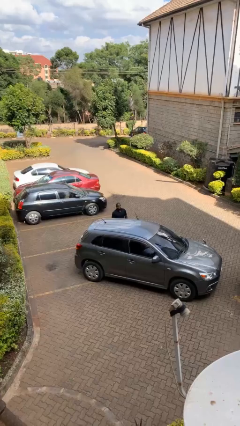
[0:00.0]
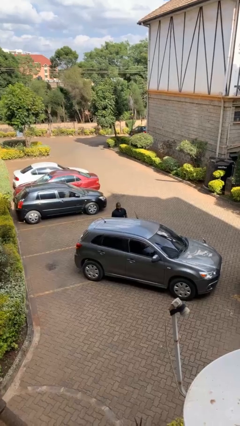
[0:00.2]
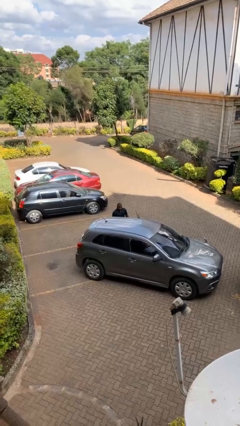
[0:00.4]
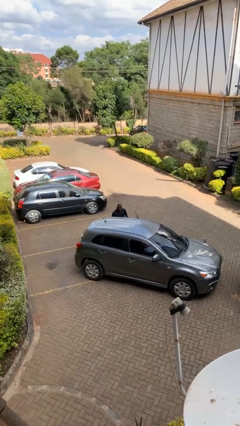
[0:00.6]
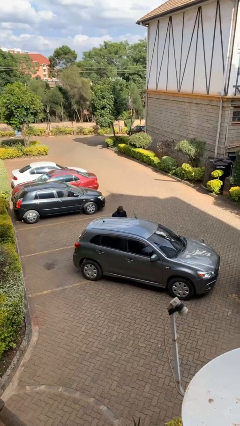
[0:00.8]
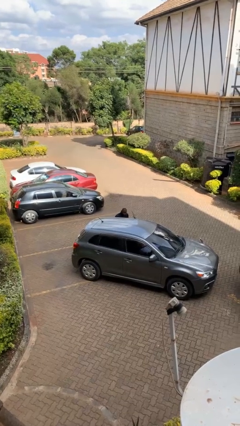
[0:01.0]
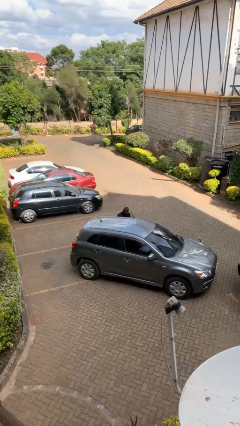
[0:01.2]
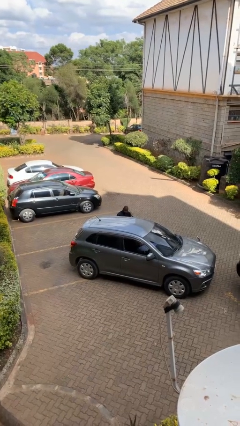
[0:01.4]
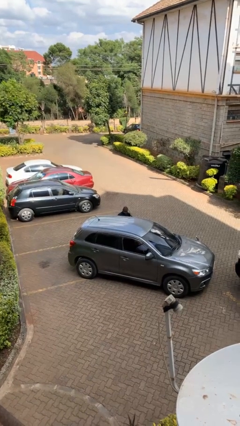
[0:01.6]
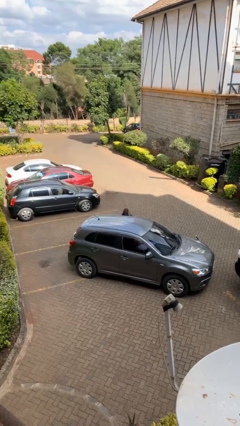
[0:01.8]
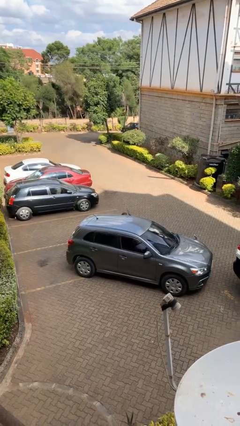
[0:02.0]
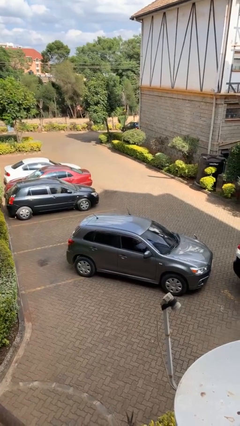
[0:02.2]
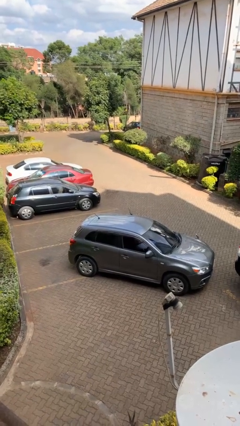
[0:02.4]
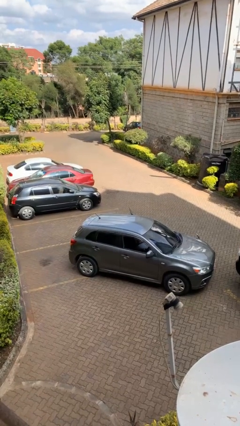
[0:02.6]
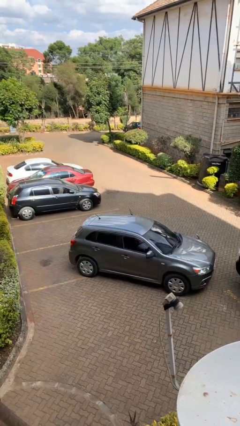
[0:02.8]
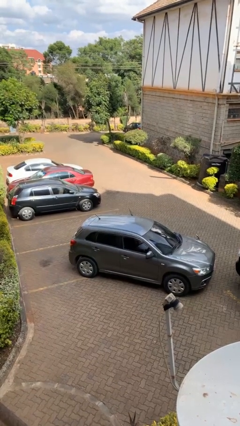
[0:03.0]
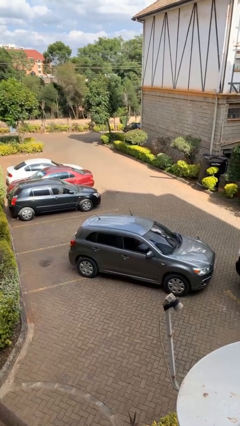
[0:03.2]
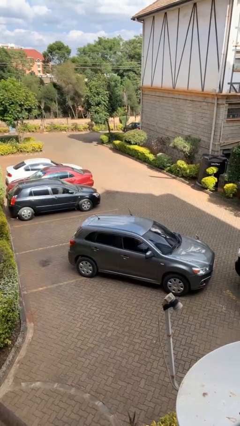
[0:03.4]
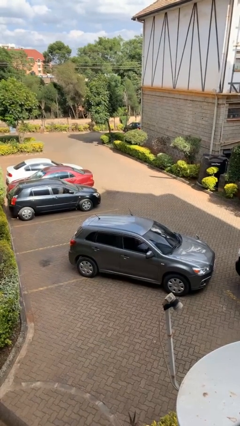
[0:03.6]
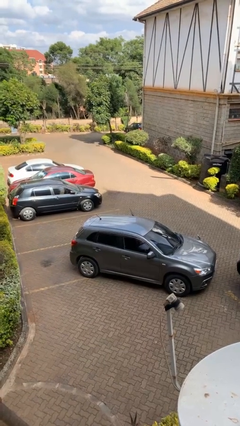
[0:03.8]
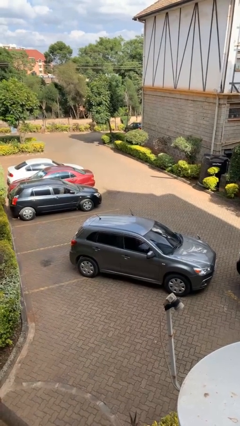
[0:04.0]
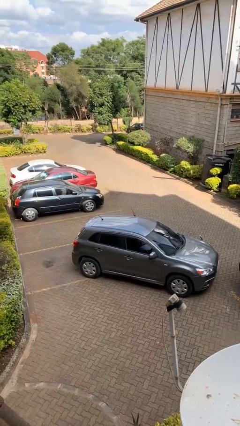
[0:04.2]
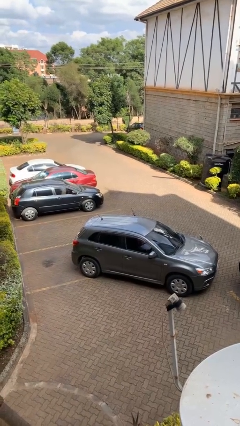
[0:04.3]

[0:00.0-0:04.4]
person enters car

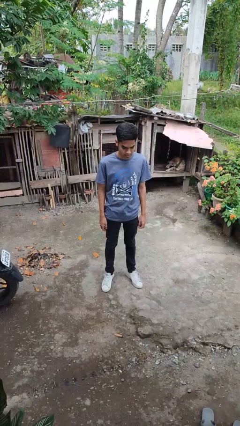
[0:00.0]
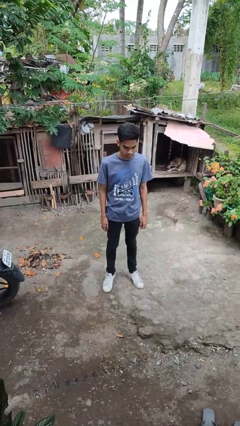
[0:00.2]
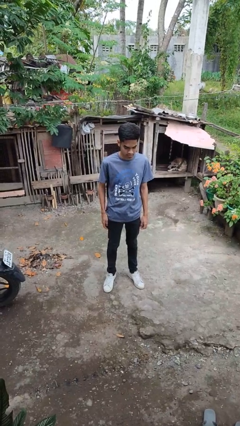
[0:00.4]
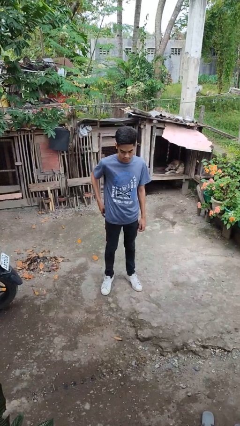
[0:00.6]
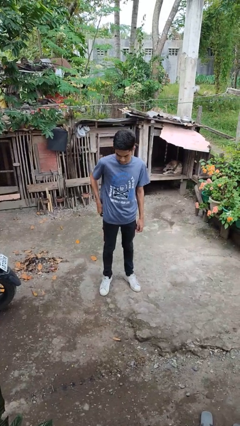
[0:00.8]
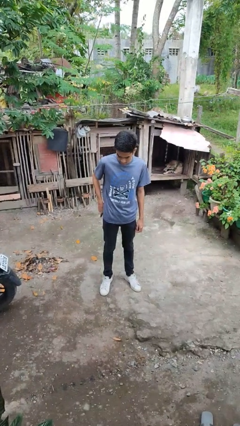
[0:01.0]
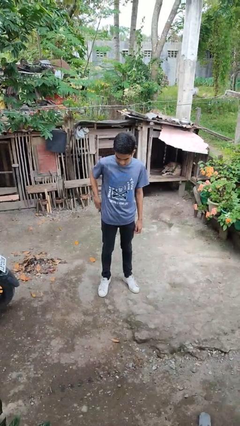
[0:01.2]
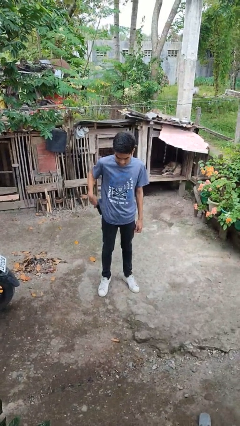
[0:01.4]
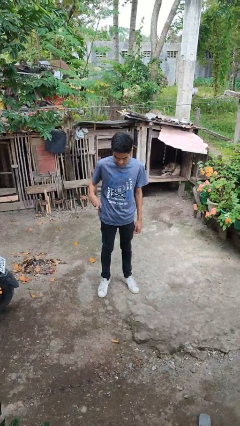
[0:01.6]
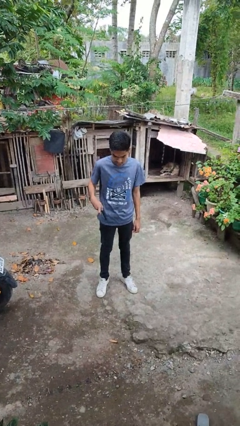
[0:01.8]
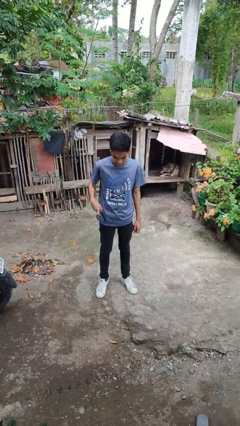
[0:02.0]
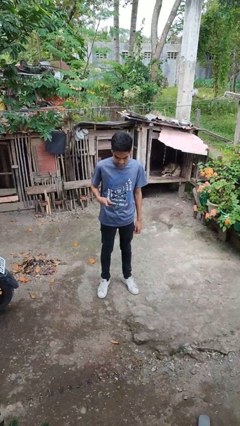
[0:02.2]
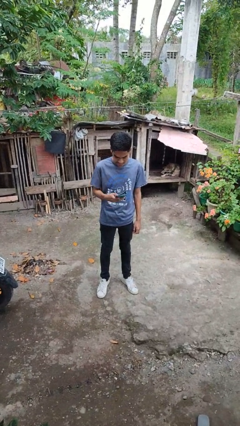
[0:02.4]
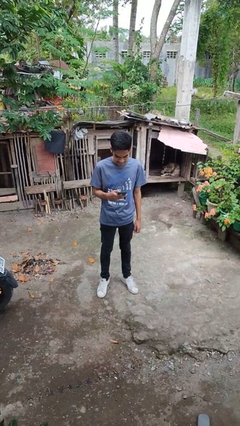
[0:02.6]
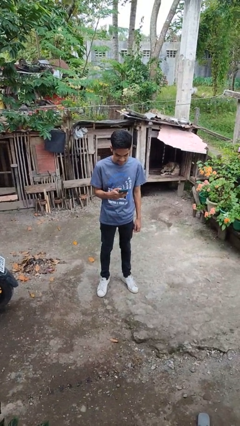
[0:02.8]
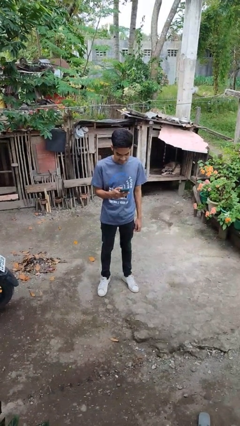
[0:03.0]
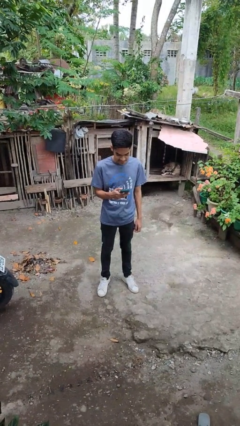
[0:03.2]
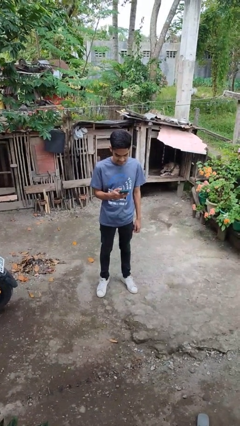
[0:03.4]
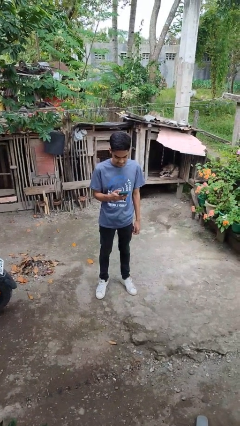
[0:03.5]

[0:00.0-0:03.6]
person takes phone from pocket

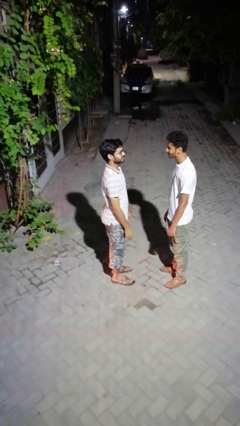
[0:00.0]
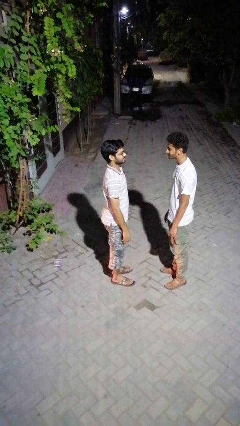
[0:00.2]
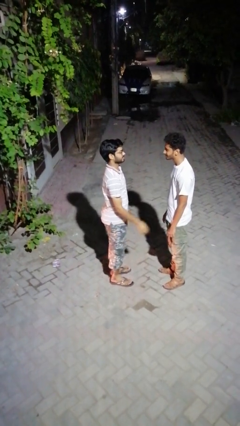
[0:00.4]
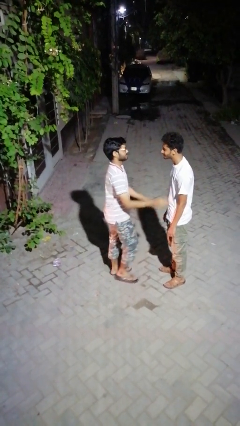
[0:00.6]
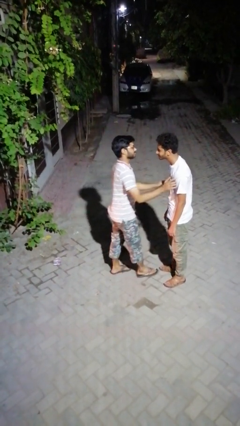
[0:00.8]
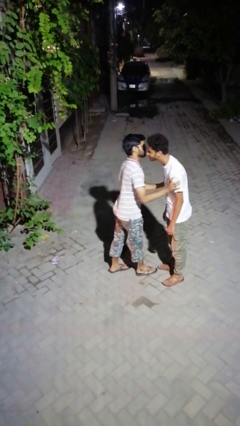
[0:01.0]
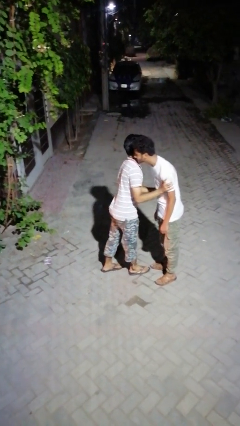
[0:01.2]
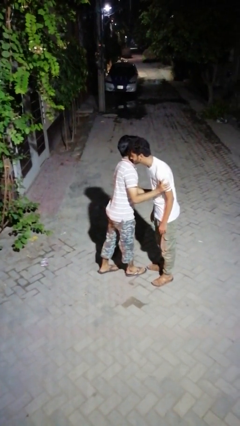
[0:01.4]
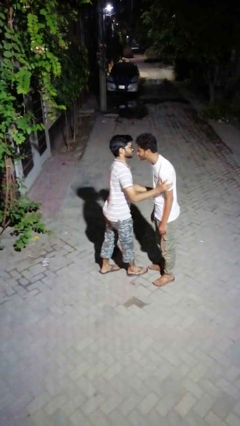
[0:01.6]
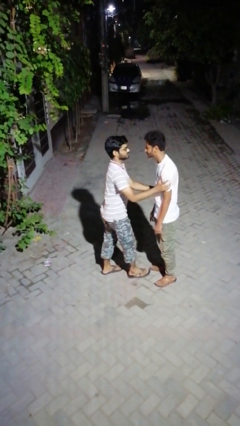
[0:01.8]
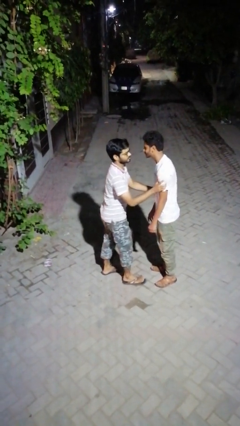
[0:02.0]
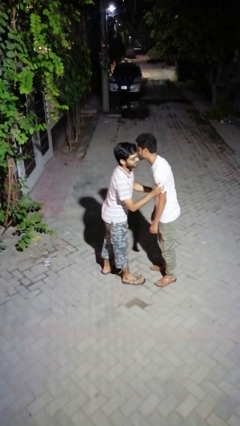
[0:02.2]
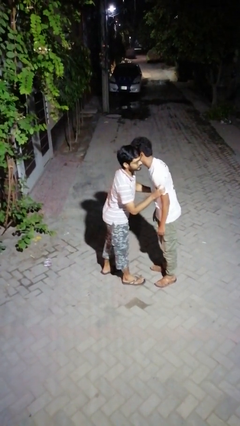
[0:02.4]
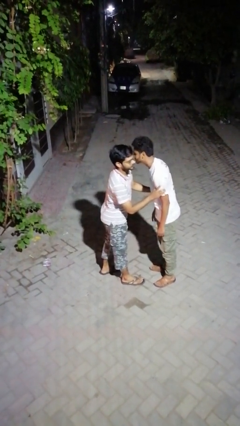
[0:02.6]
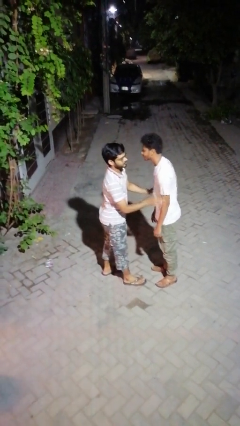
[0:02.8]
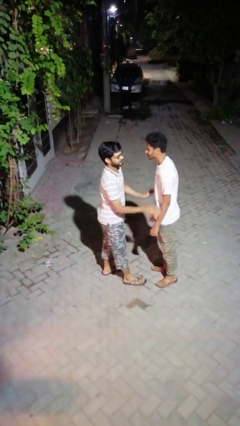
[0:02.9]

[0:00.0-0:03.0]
person kisses cheek of person

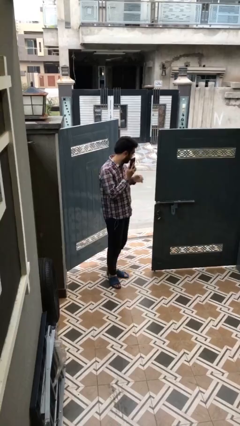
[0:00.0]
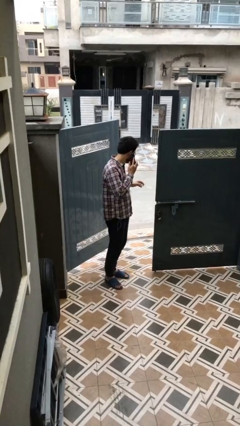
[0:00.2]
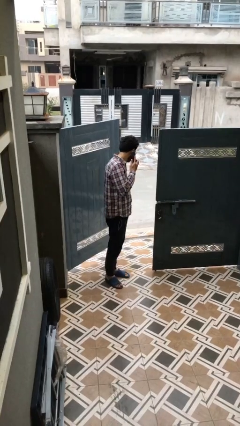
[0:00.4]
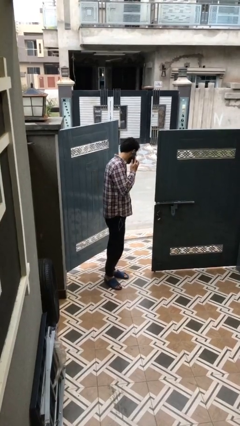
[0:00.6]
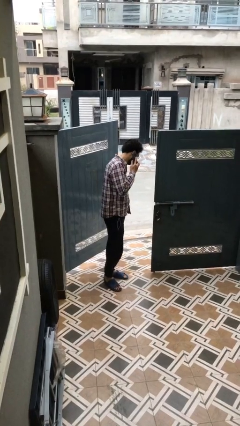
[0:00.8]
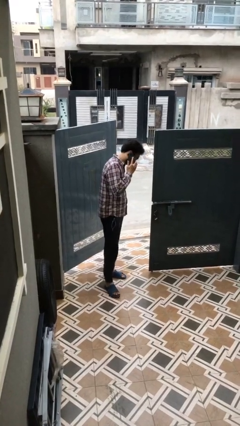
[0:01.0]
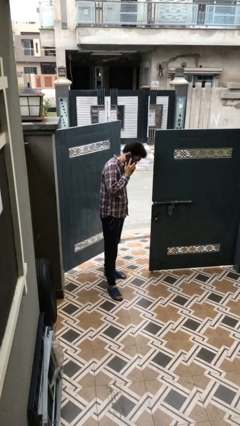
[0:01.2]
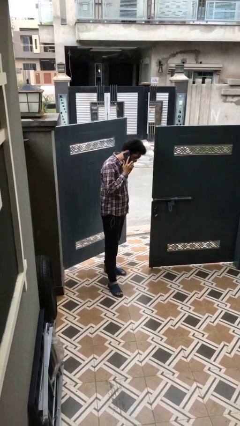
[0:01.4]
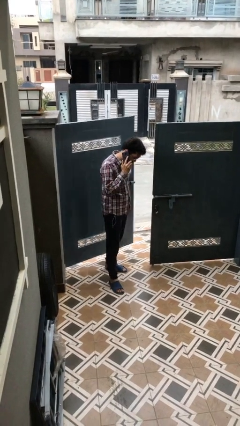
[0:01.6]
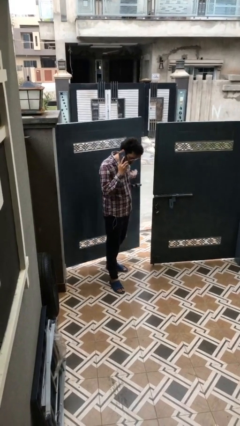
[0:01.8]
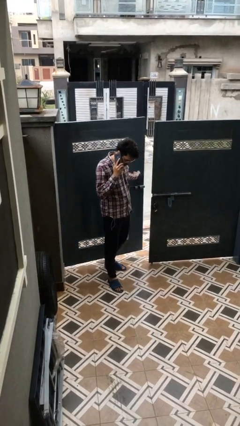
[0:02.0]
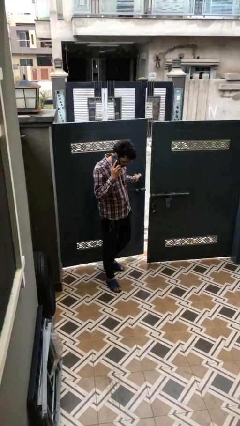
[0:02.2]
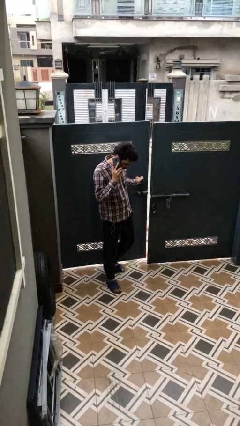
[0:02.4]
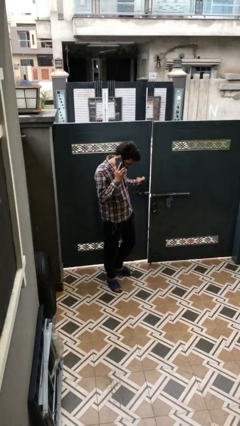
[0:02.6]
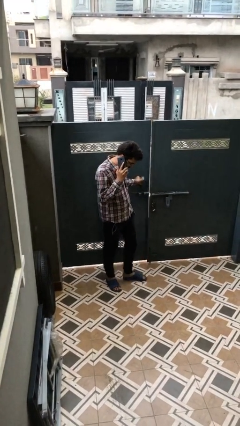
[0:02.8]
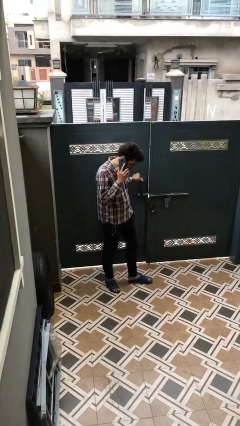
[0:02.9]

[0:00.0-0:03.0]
person closes facility door

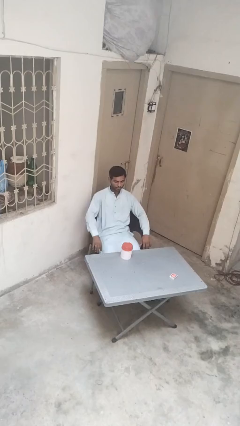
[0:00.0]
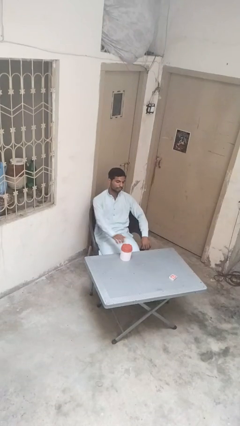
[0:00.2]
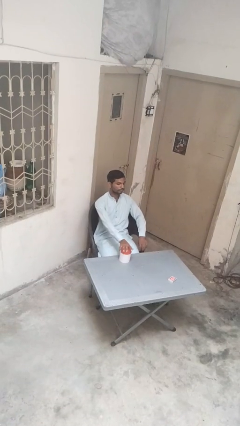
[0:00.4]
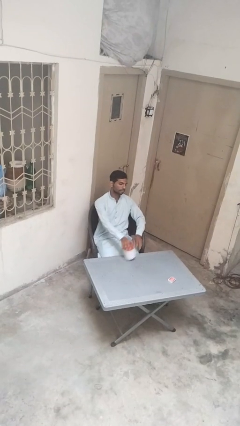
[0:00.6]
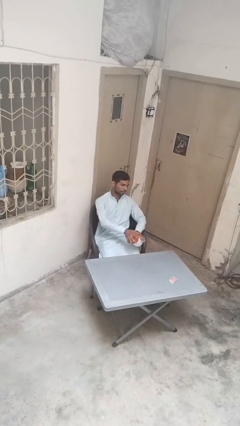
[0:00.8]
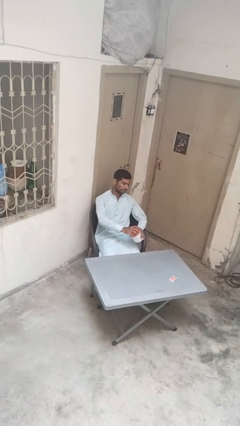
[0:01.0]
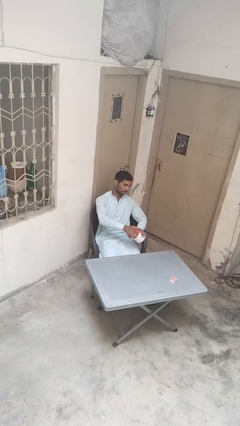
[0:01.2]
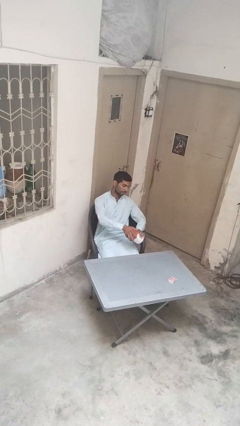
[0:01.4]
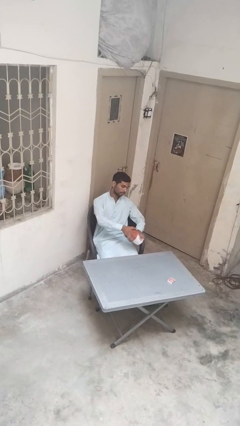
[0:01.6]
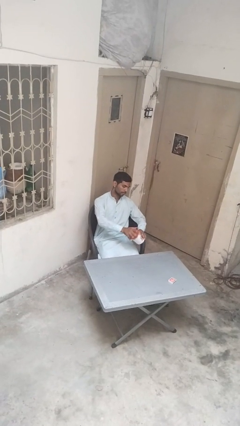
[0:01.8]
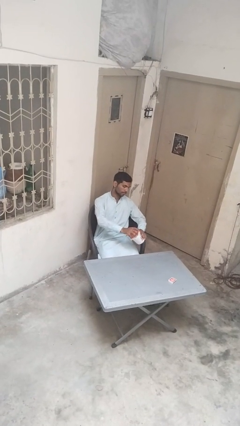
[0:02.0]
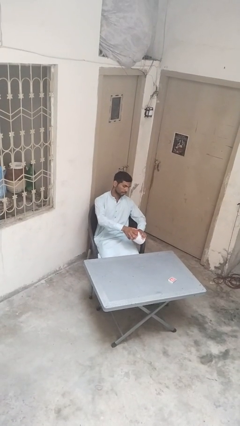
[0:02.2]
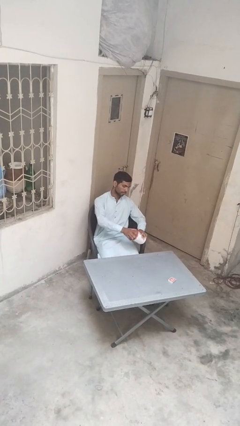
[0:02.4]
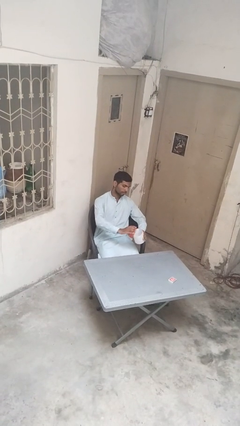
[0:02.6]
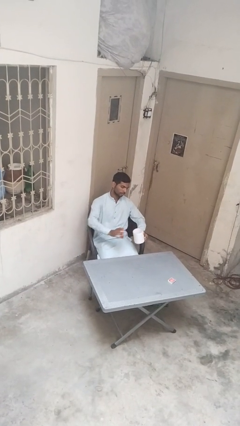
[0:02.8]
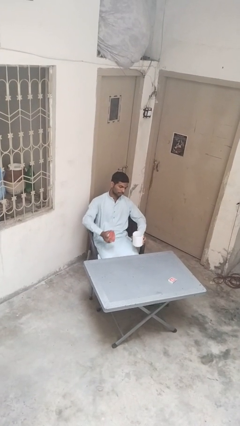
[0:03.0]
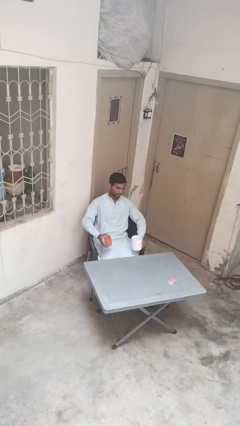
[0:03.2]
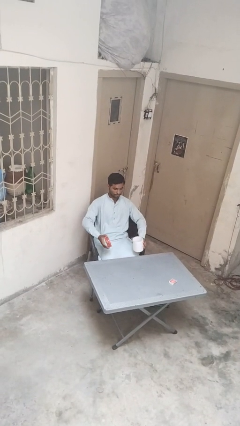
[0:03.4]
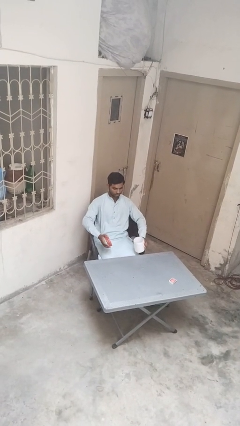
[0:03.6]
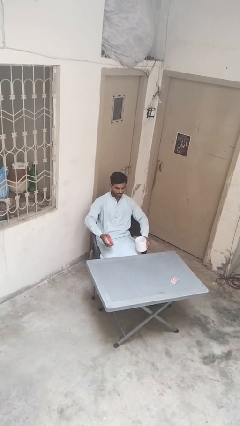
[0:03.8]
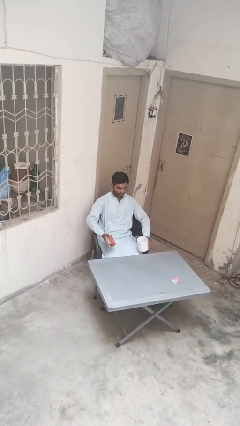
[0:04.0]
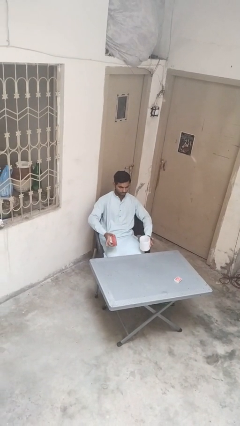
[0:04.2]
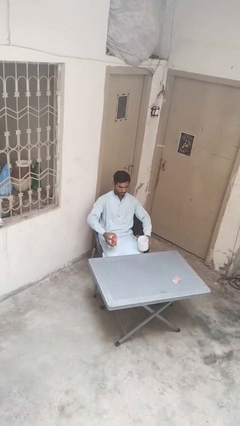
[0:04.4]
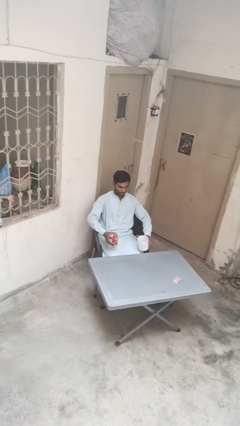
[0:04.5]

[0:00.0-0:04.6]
person opens jar
